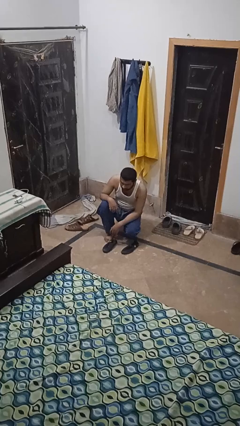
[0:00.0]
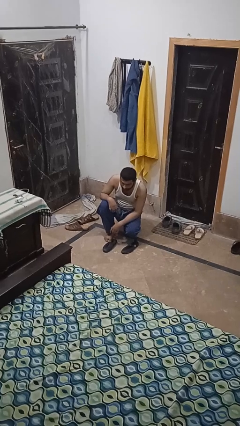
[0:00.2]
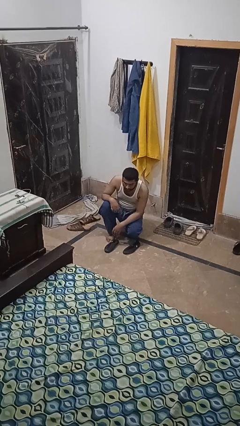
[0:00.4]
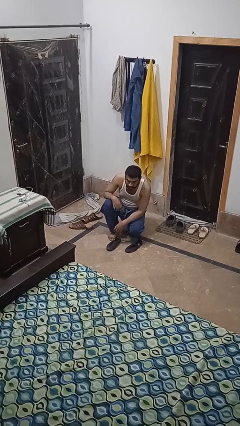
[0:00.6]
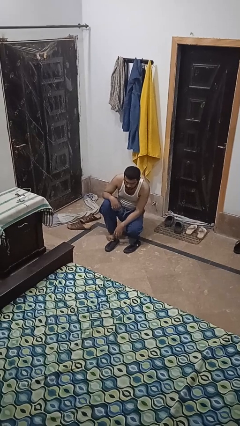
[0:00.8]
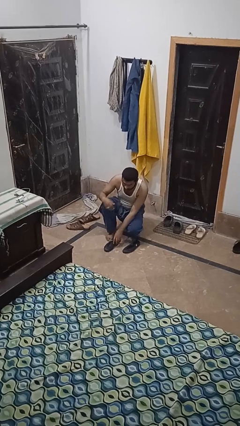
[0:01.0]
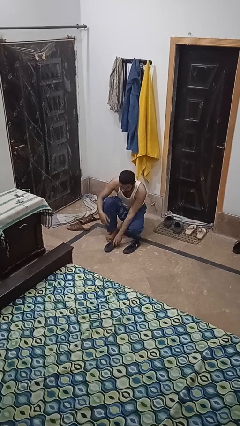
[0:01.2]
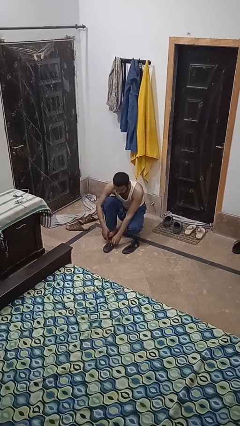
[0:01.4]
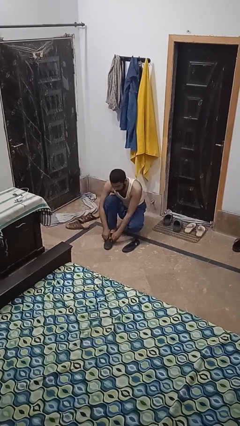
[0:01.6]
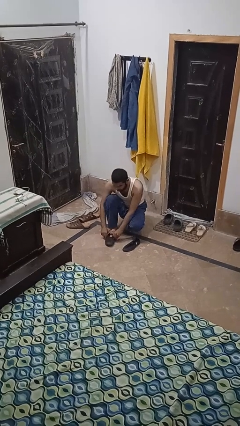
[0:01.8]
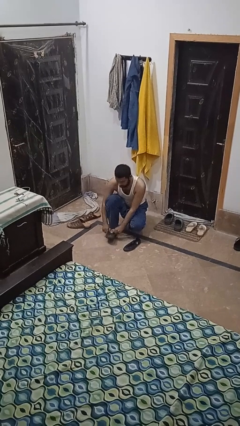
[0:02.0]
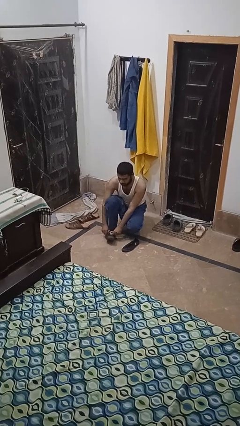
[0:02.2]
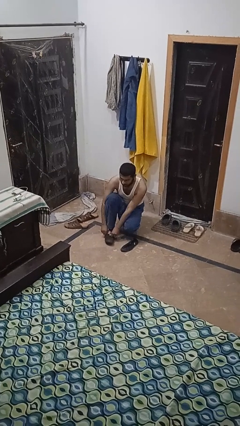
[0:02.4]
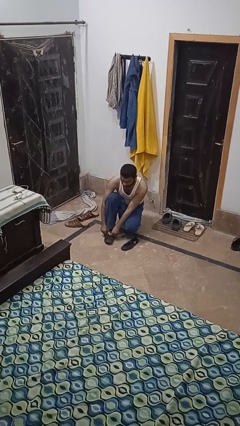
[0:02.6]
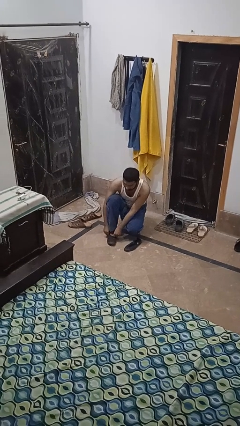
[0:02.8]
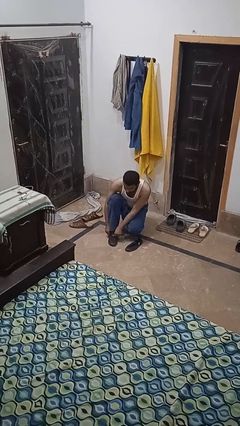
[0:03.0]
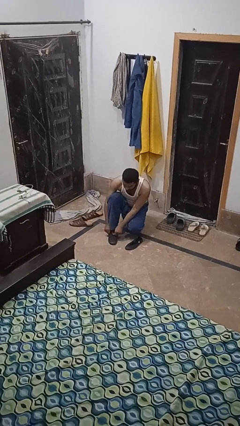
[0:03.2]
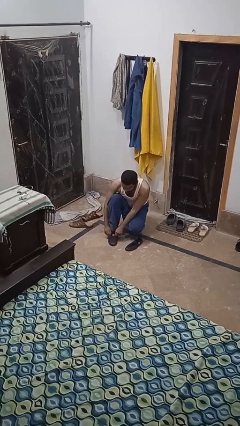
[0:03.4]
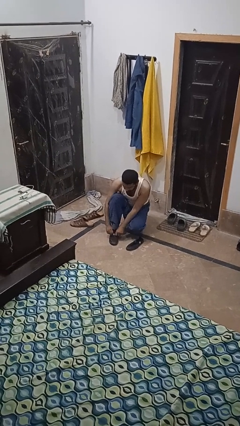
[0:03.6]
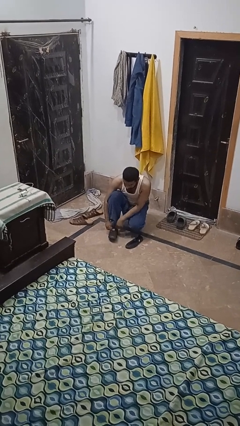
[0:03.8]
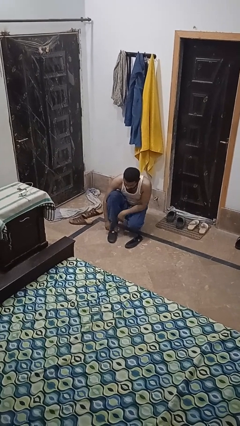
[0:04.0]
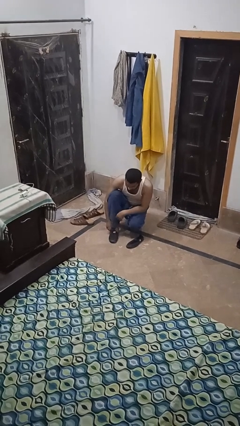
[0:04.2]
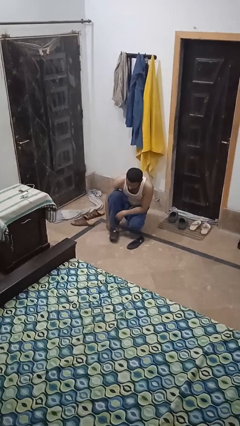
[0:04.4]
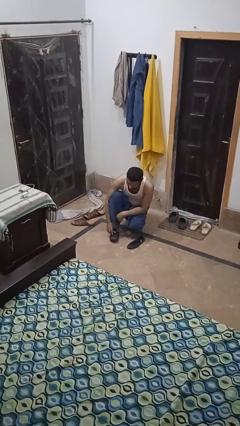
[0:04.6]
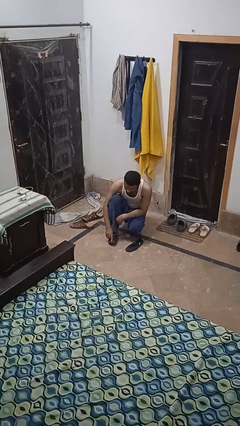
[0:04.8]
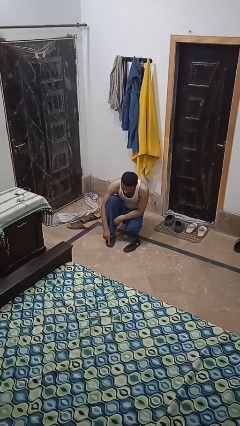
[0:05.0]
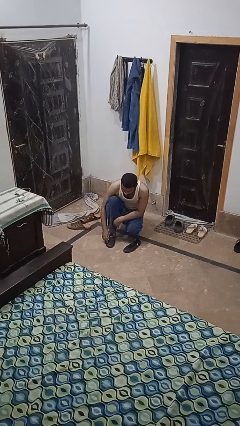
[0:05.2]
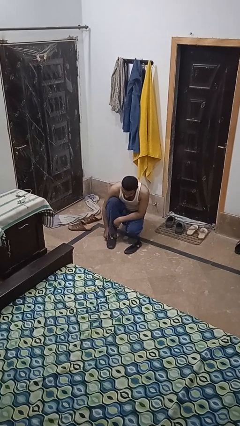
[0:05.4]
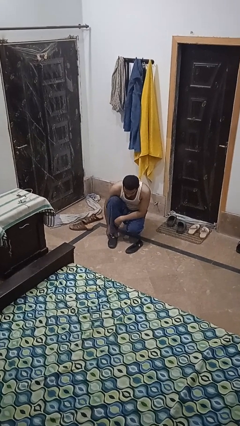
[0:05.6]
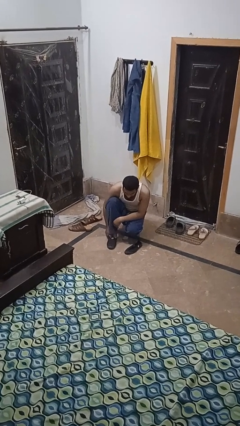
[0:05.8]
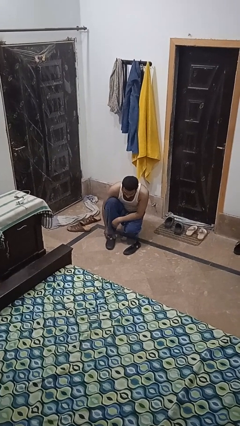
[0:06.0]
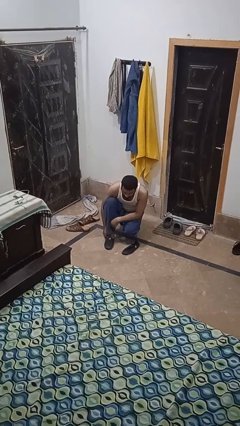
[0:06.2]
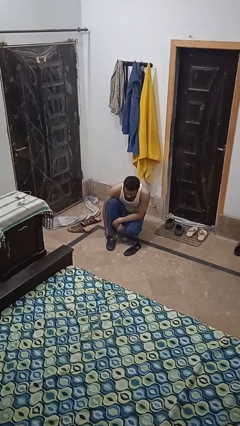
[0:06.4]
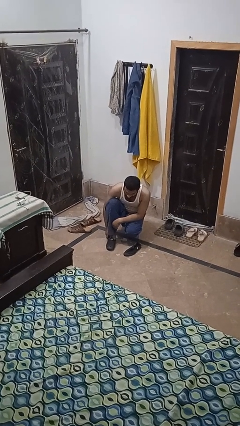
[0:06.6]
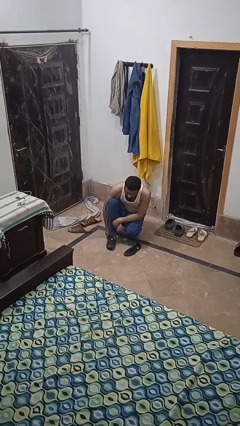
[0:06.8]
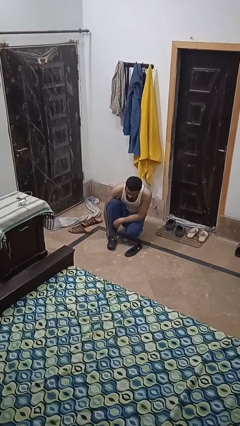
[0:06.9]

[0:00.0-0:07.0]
person puts on shoes

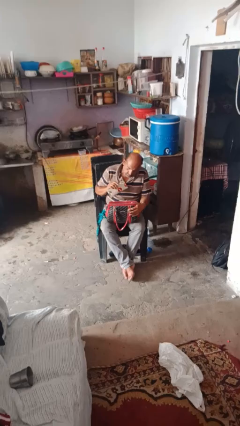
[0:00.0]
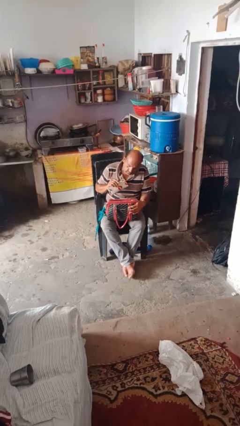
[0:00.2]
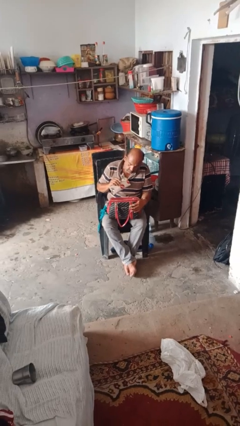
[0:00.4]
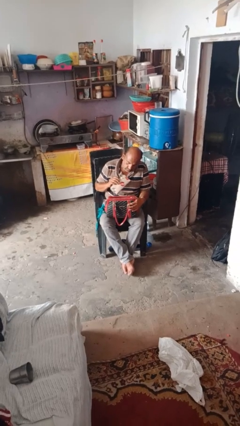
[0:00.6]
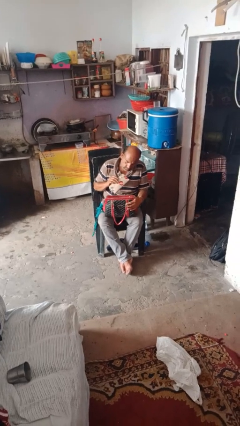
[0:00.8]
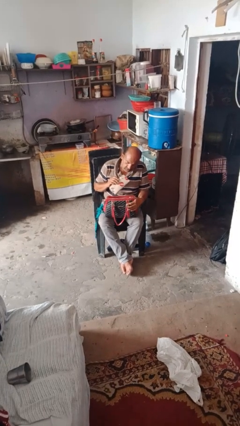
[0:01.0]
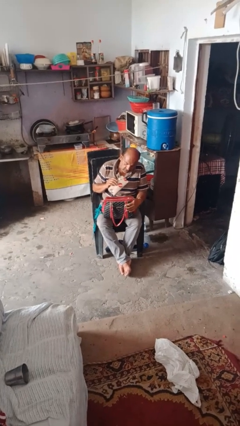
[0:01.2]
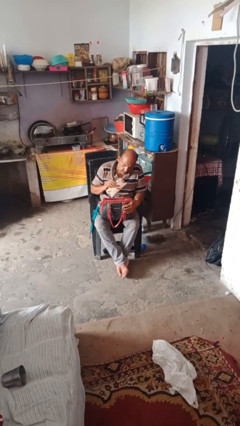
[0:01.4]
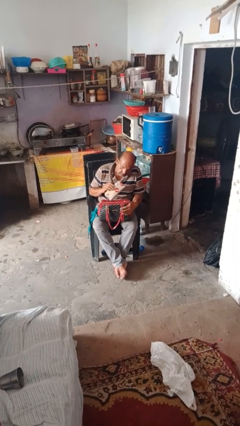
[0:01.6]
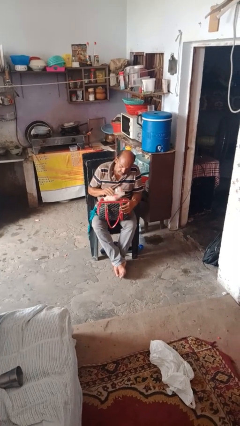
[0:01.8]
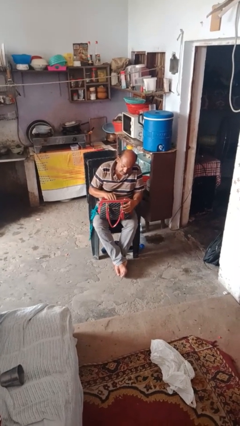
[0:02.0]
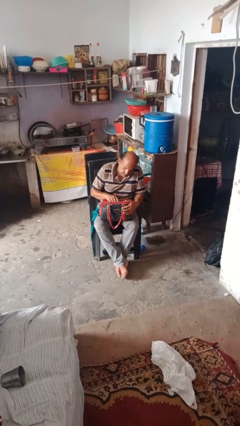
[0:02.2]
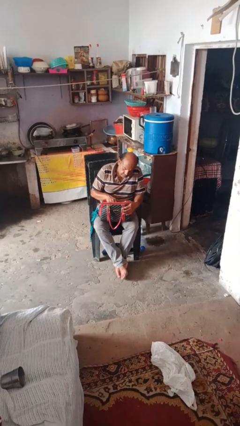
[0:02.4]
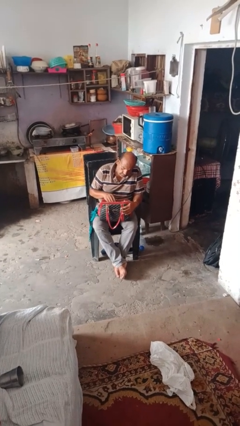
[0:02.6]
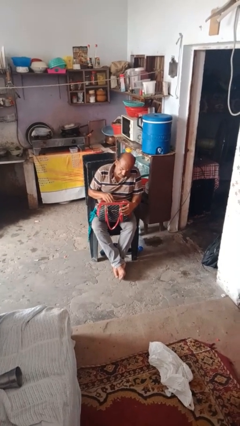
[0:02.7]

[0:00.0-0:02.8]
person puts object into purse

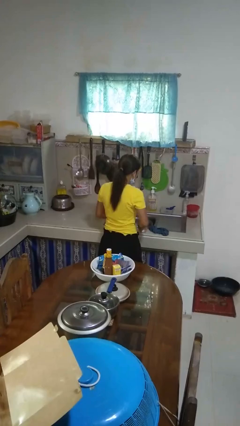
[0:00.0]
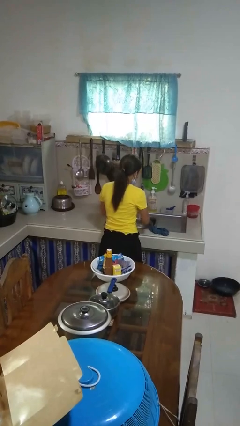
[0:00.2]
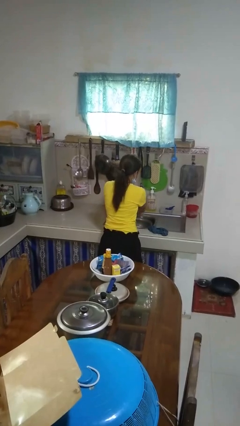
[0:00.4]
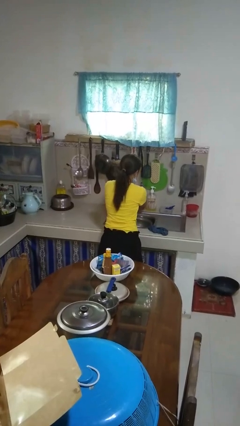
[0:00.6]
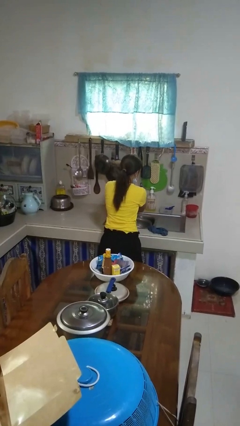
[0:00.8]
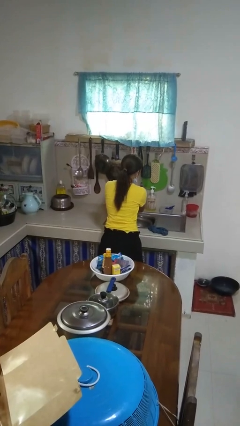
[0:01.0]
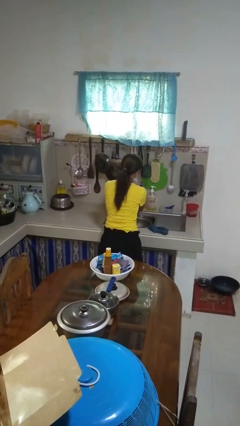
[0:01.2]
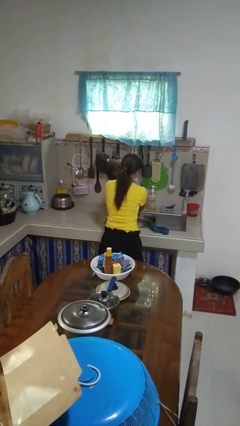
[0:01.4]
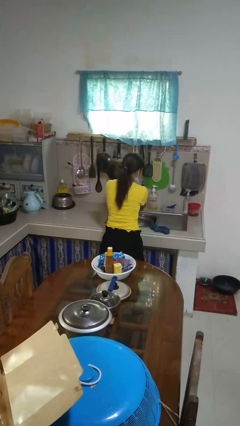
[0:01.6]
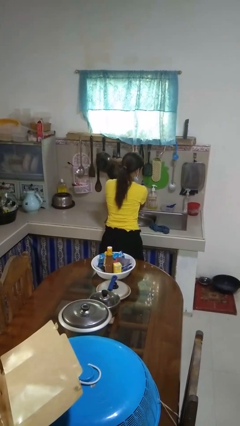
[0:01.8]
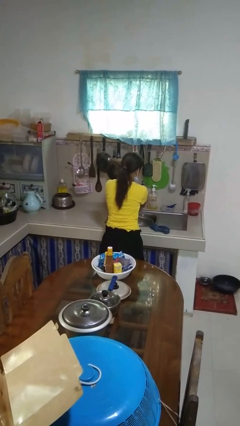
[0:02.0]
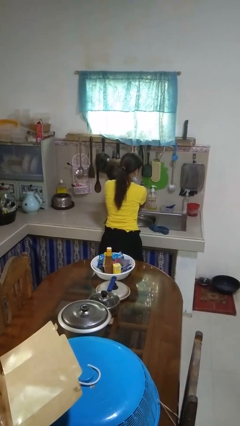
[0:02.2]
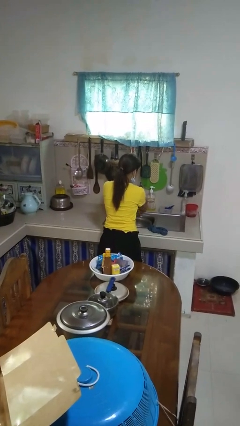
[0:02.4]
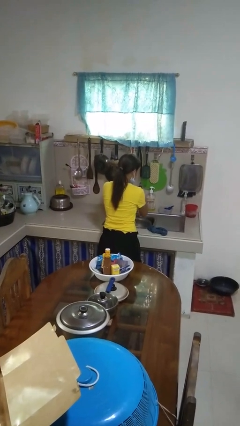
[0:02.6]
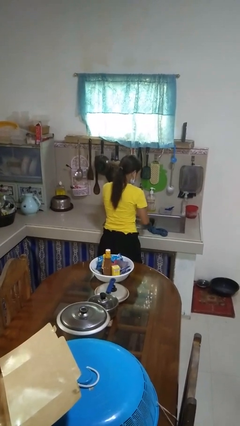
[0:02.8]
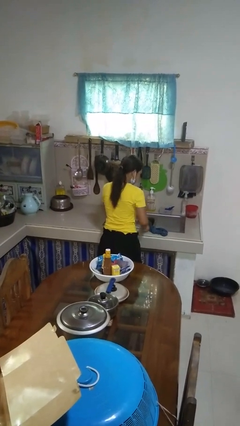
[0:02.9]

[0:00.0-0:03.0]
person washes hands

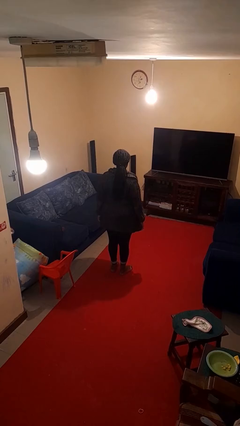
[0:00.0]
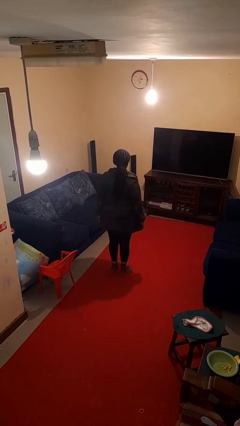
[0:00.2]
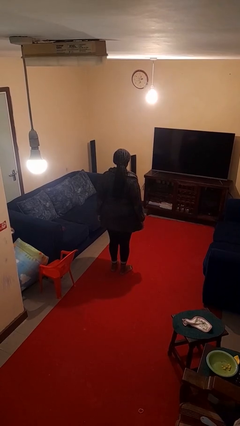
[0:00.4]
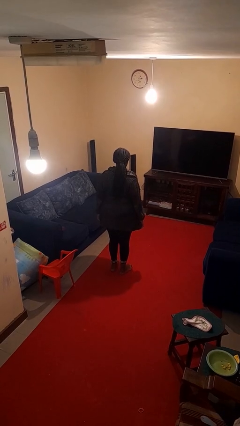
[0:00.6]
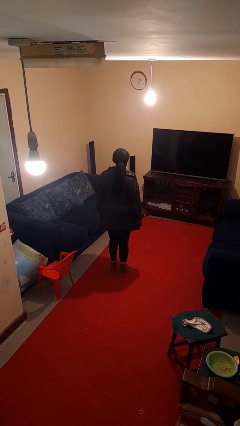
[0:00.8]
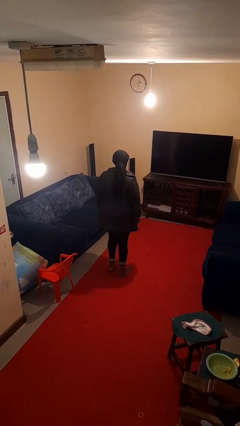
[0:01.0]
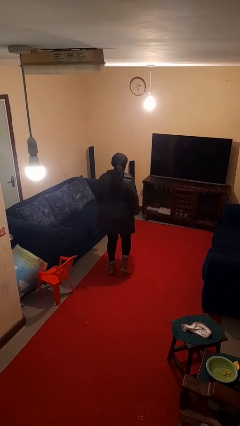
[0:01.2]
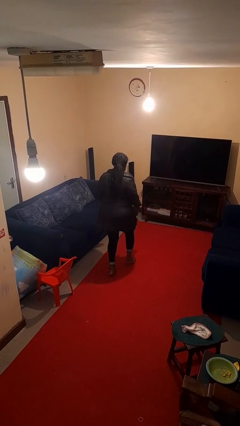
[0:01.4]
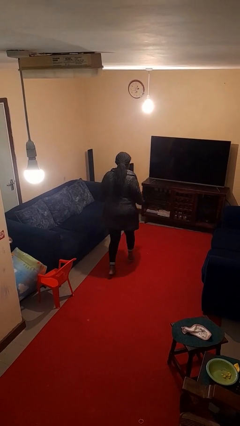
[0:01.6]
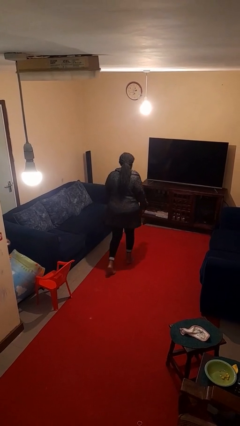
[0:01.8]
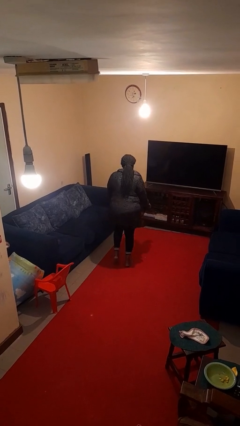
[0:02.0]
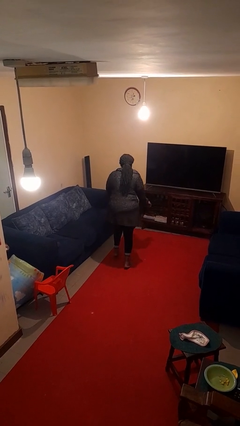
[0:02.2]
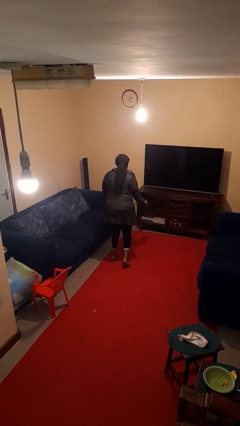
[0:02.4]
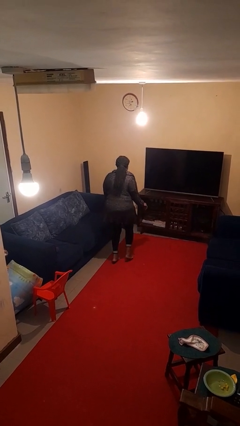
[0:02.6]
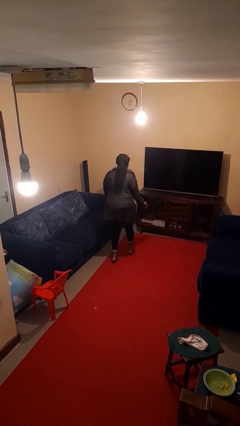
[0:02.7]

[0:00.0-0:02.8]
person walks tiptoe

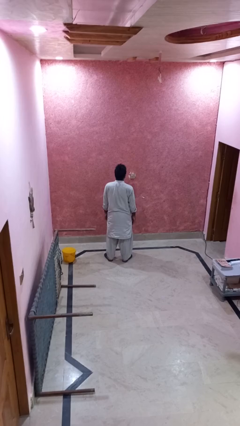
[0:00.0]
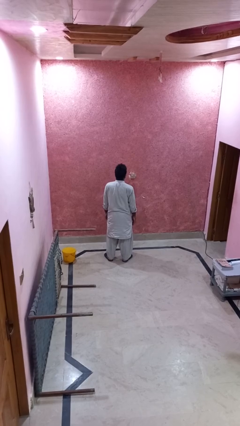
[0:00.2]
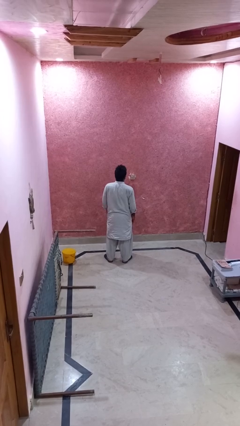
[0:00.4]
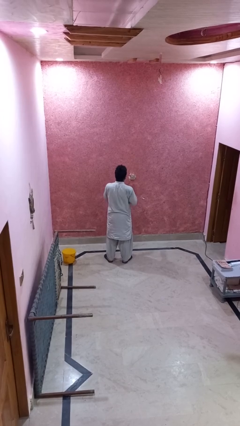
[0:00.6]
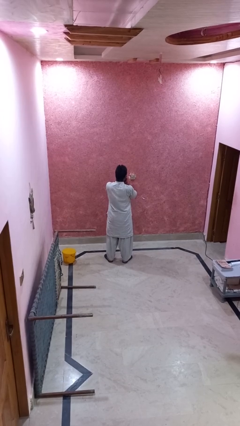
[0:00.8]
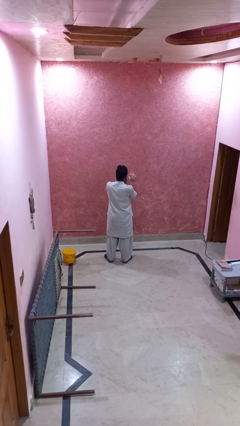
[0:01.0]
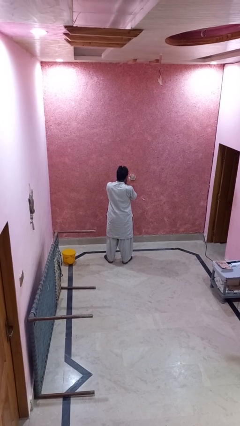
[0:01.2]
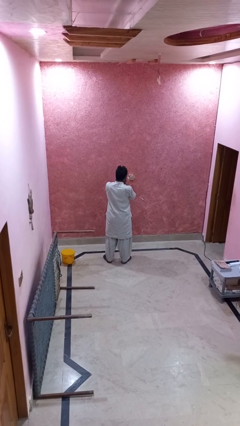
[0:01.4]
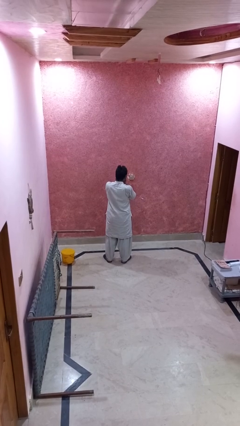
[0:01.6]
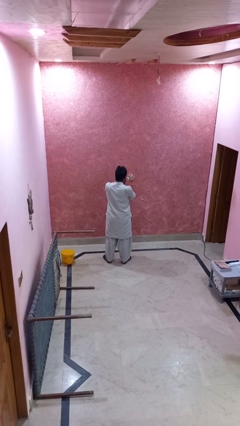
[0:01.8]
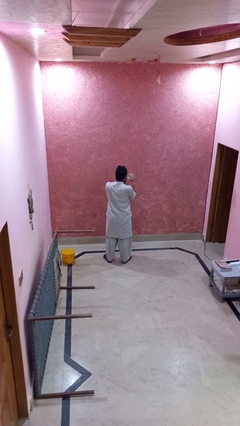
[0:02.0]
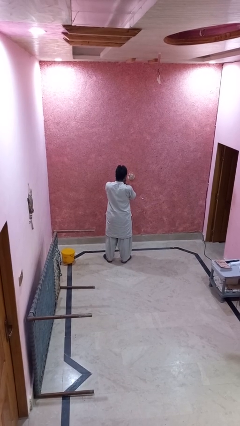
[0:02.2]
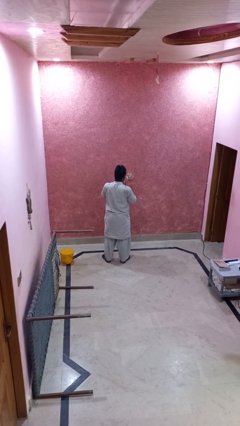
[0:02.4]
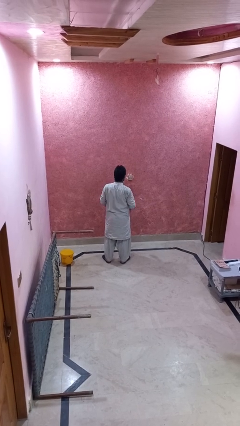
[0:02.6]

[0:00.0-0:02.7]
person sneezes into hand
